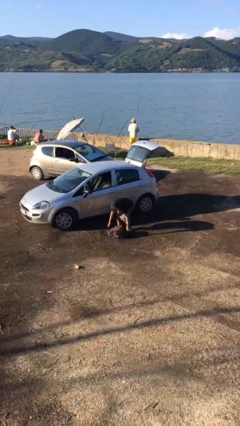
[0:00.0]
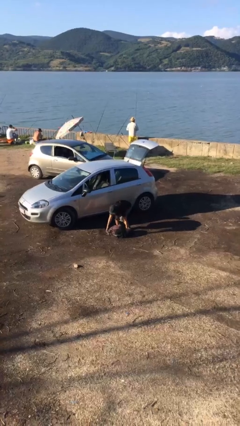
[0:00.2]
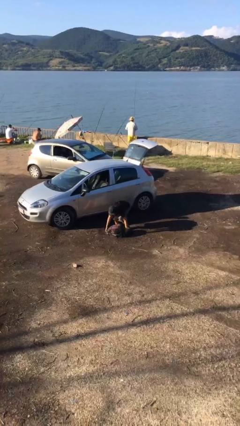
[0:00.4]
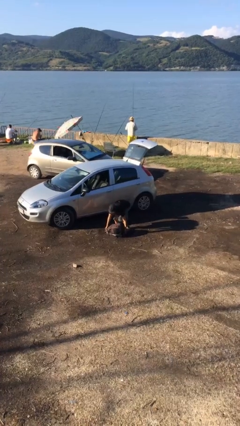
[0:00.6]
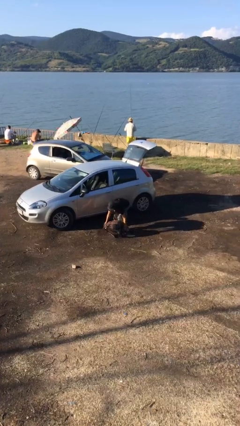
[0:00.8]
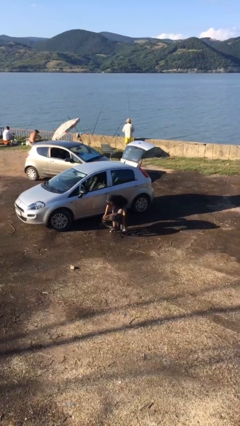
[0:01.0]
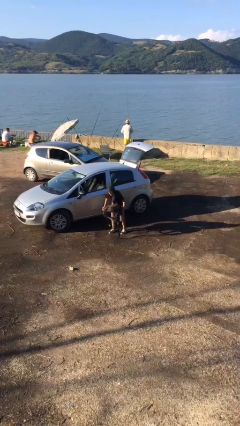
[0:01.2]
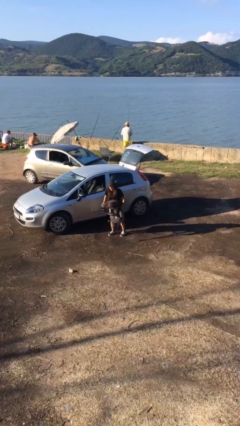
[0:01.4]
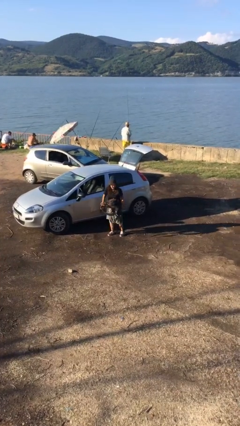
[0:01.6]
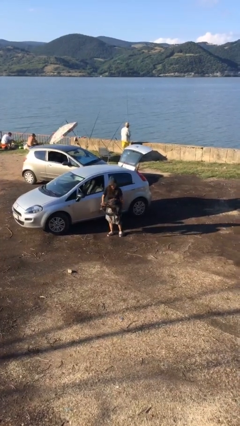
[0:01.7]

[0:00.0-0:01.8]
person picks up object from floor

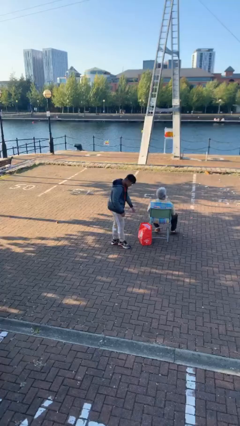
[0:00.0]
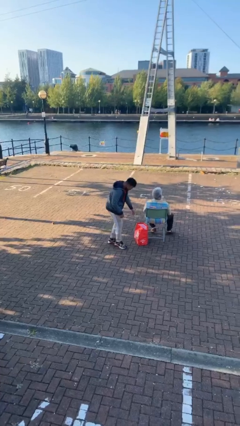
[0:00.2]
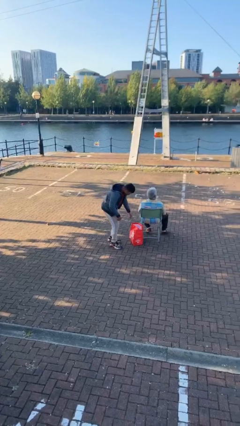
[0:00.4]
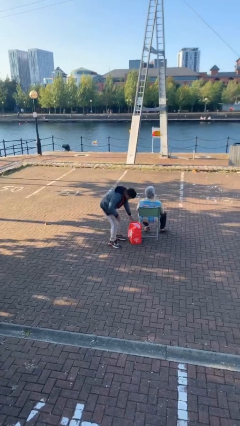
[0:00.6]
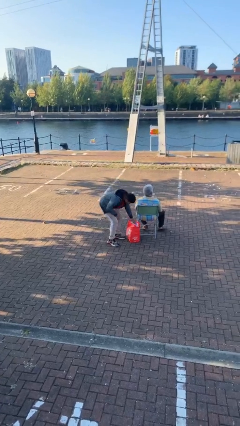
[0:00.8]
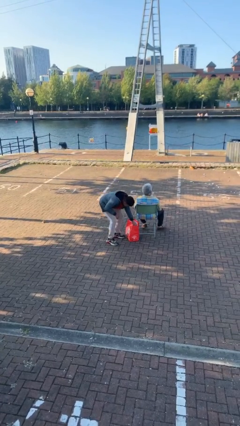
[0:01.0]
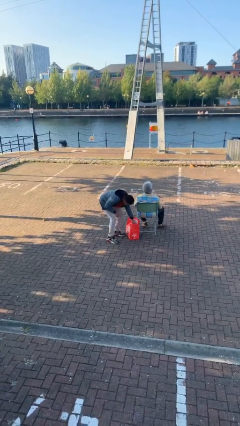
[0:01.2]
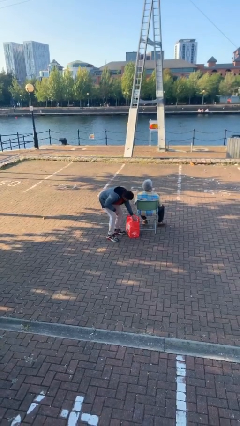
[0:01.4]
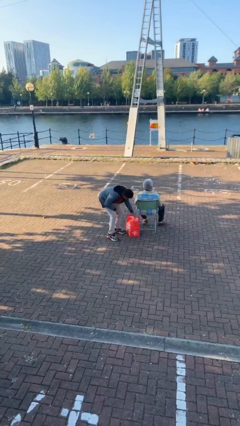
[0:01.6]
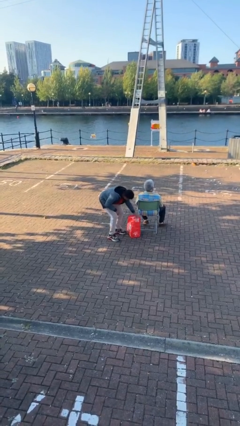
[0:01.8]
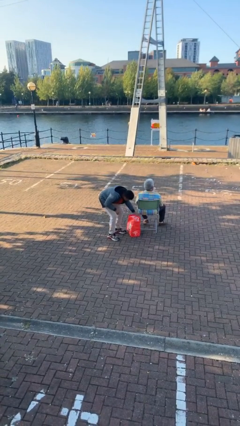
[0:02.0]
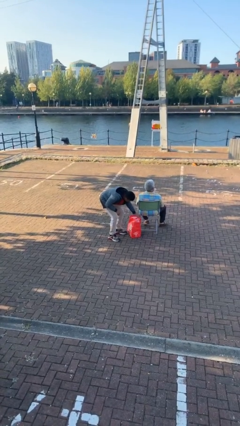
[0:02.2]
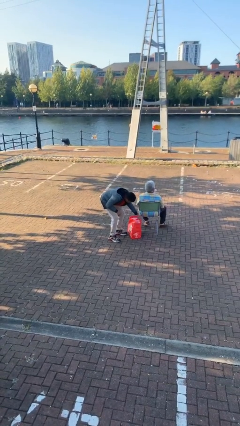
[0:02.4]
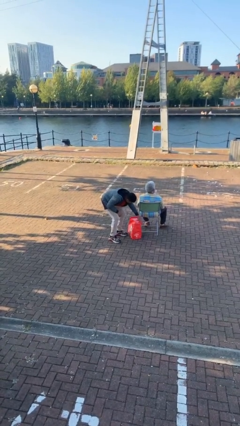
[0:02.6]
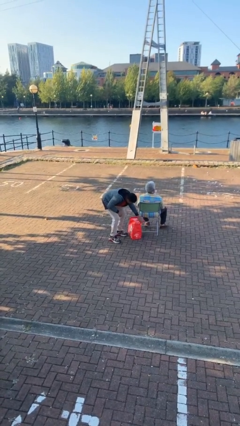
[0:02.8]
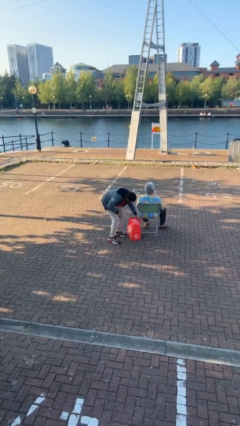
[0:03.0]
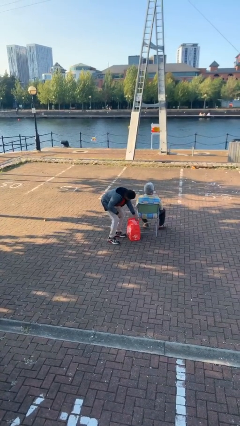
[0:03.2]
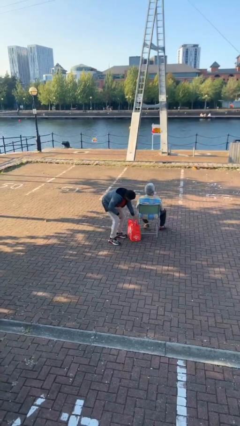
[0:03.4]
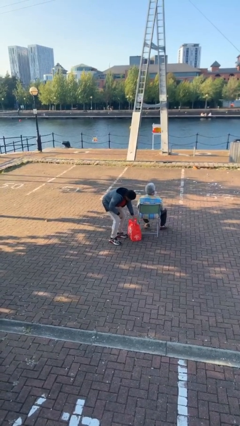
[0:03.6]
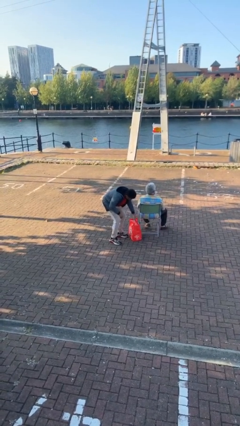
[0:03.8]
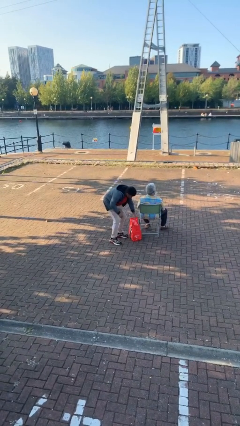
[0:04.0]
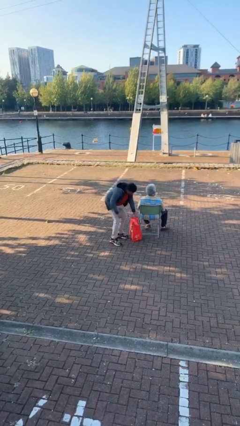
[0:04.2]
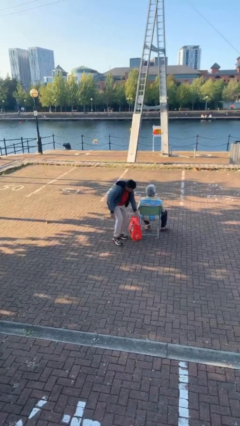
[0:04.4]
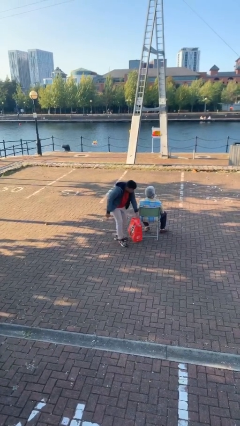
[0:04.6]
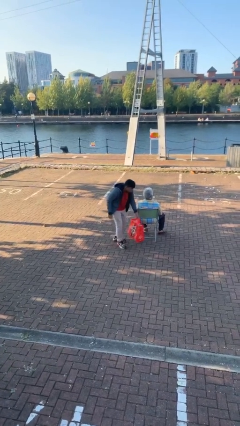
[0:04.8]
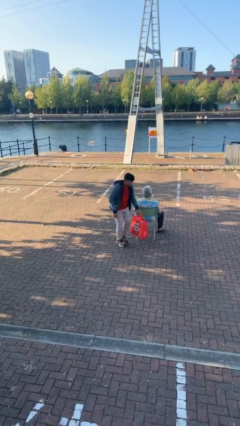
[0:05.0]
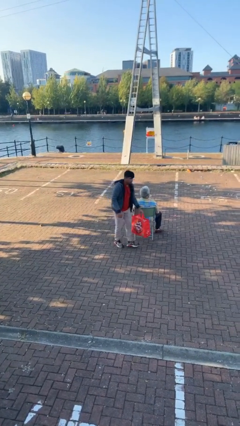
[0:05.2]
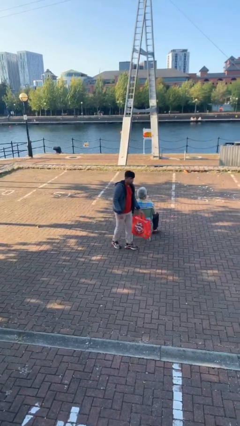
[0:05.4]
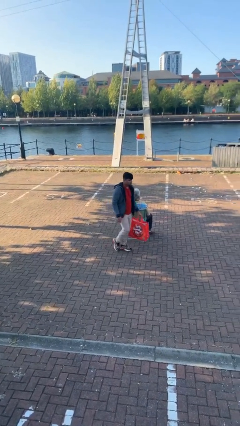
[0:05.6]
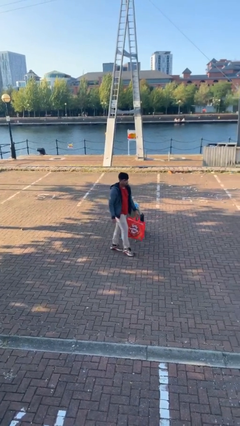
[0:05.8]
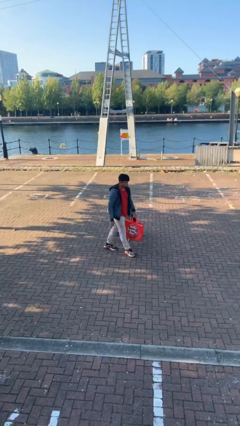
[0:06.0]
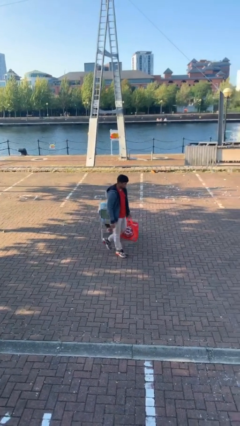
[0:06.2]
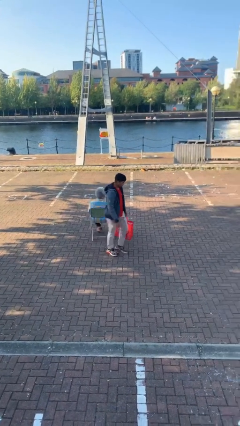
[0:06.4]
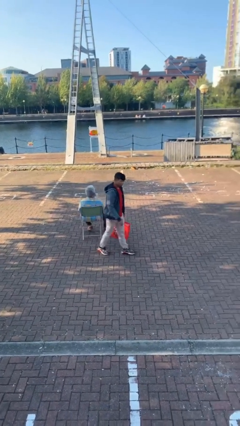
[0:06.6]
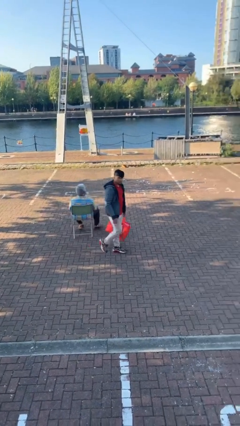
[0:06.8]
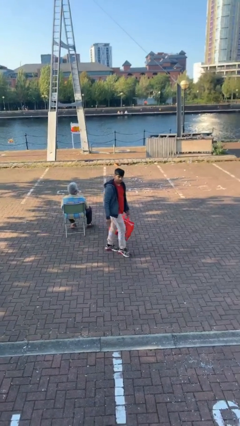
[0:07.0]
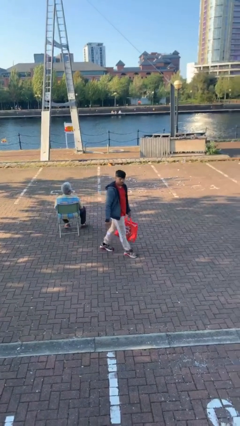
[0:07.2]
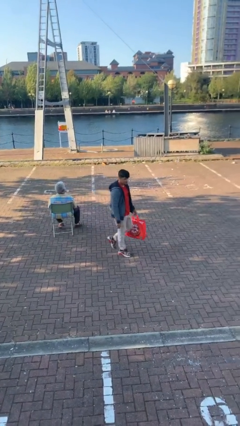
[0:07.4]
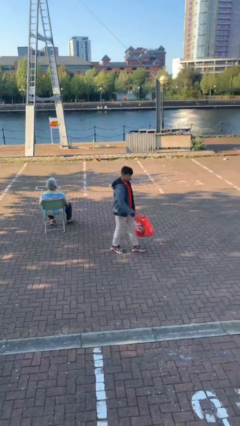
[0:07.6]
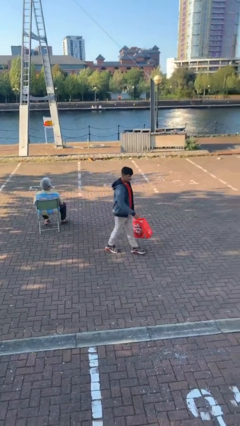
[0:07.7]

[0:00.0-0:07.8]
person steals object from person

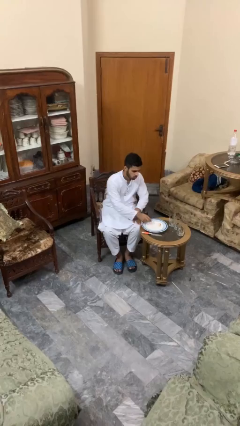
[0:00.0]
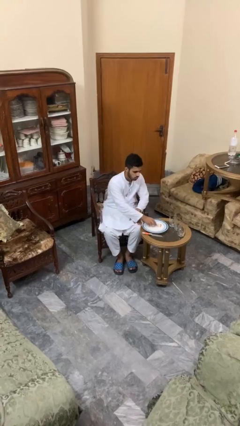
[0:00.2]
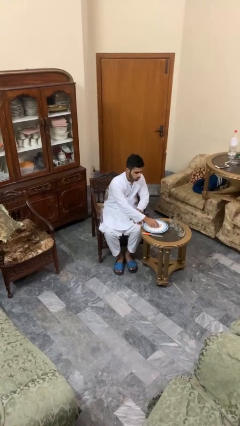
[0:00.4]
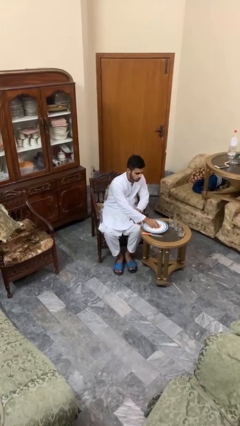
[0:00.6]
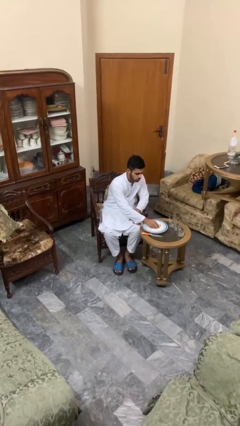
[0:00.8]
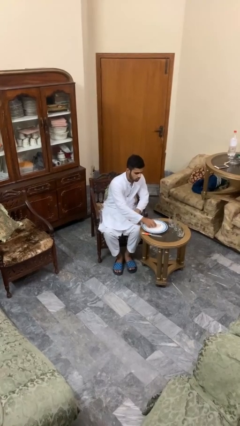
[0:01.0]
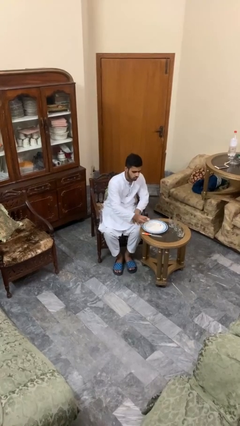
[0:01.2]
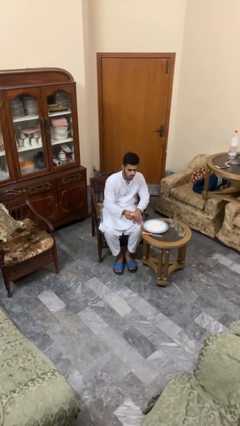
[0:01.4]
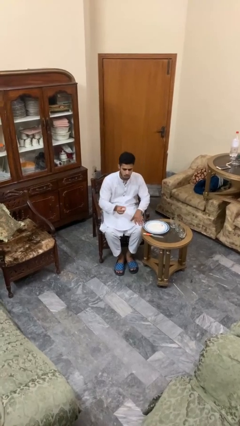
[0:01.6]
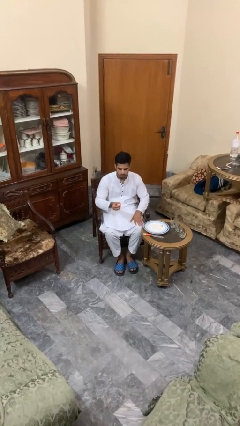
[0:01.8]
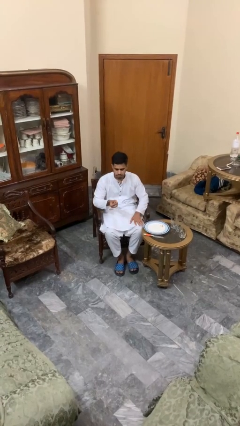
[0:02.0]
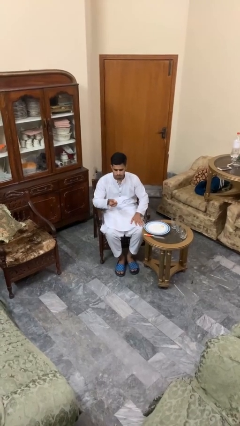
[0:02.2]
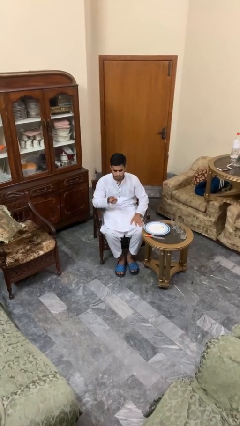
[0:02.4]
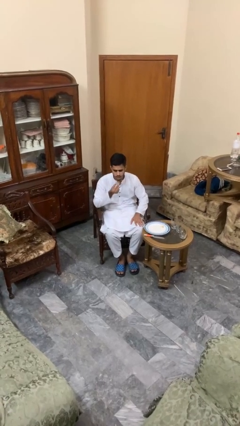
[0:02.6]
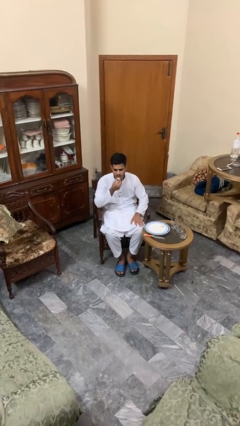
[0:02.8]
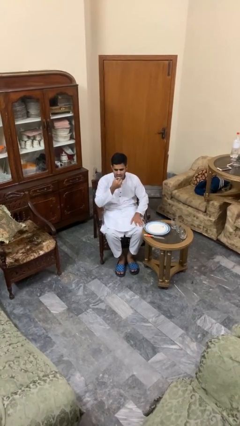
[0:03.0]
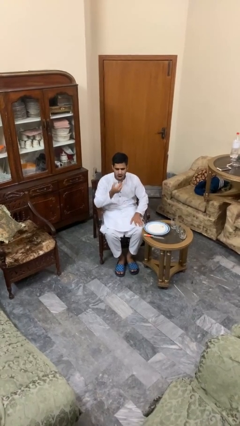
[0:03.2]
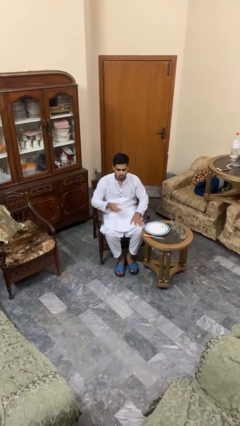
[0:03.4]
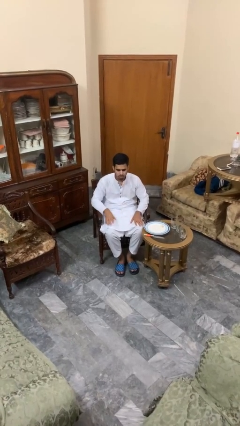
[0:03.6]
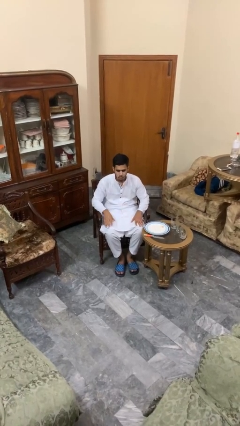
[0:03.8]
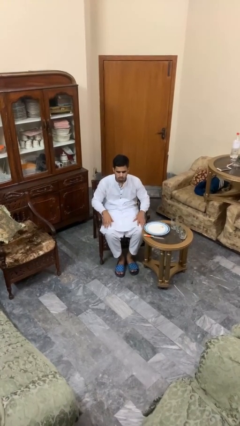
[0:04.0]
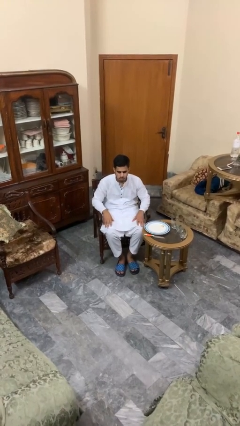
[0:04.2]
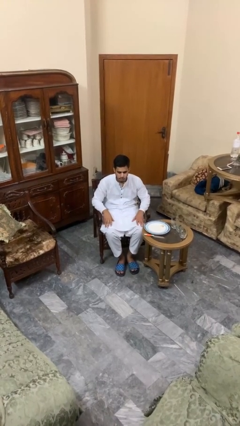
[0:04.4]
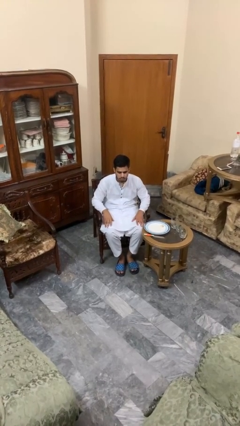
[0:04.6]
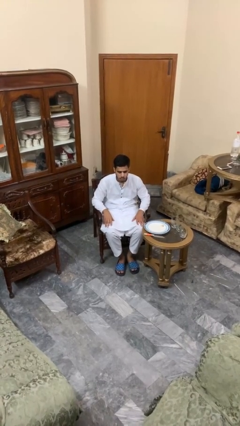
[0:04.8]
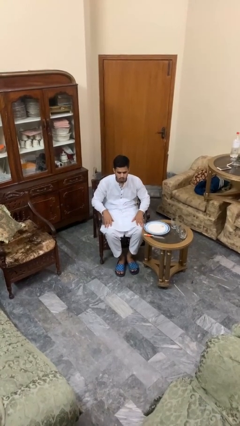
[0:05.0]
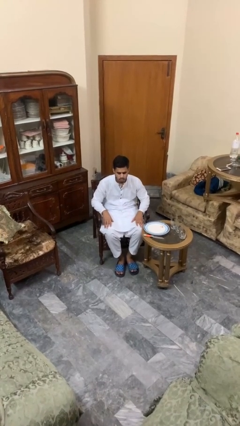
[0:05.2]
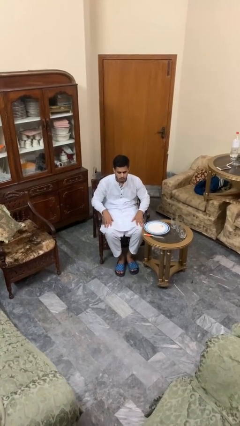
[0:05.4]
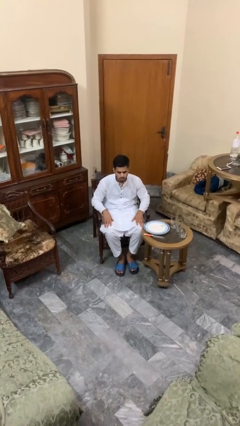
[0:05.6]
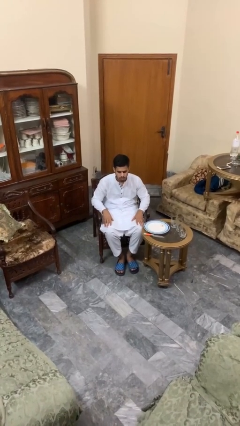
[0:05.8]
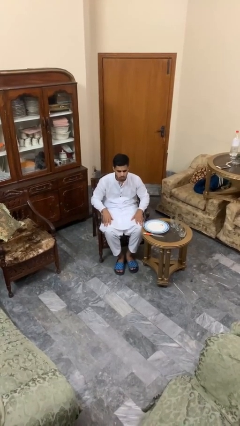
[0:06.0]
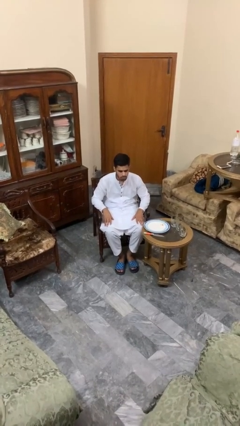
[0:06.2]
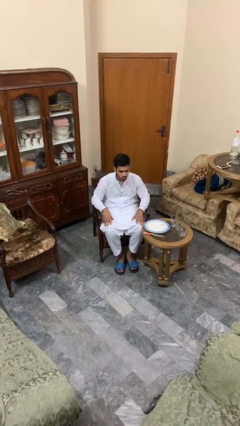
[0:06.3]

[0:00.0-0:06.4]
person eats with hands

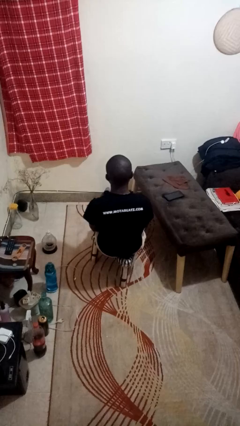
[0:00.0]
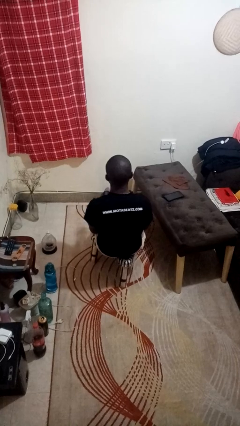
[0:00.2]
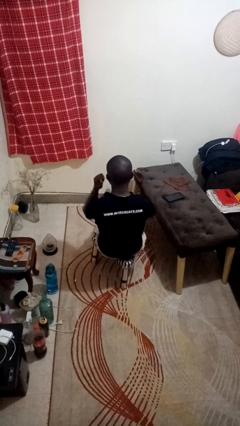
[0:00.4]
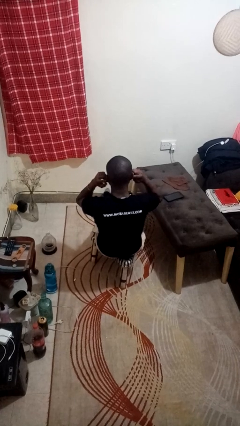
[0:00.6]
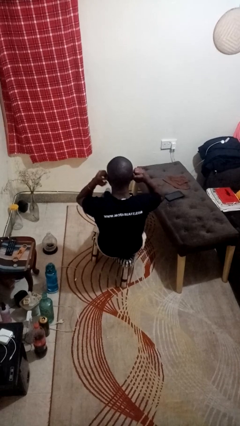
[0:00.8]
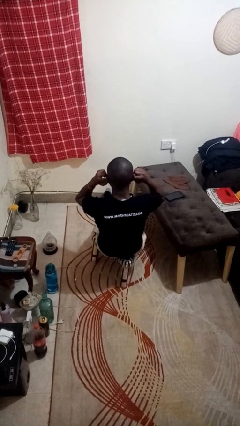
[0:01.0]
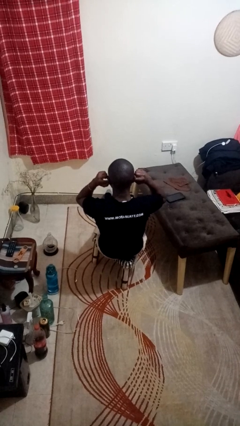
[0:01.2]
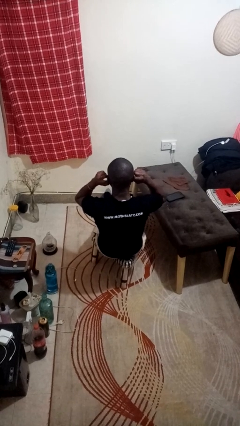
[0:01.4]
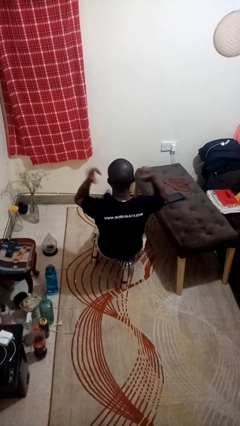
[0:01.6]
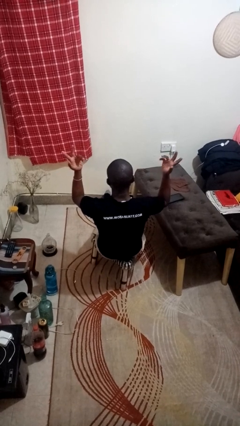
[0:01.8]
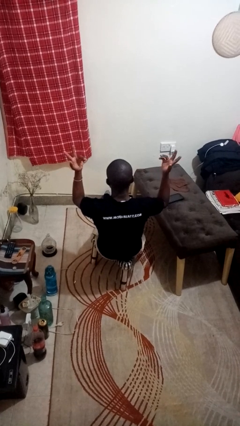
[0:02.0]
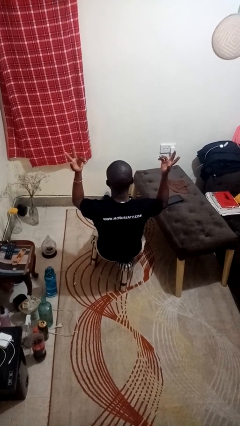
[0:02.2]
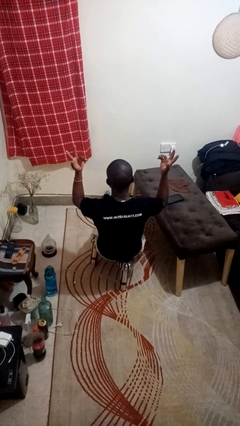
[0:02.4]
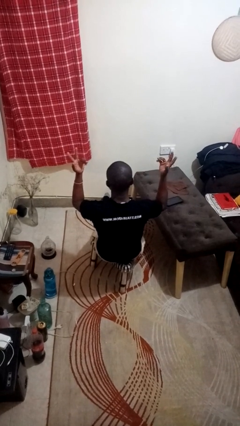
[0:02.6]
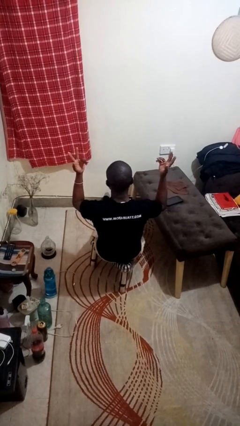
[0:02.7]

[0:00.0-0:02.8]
person puts fingers in ear
